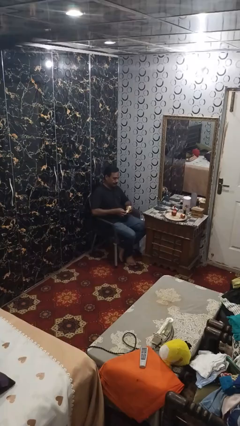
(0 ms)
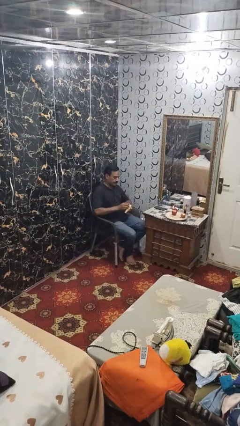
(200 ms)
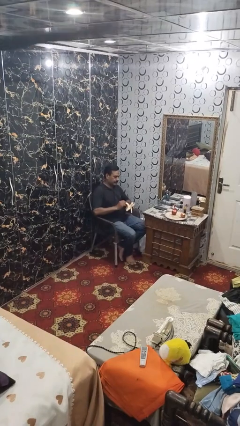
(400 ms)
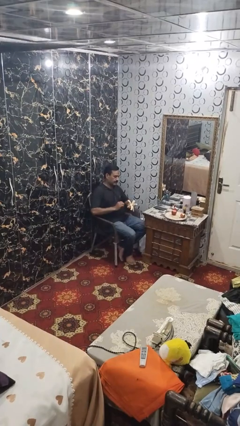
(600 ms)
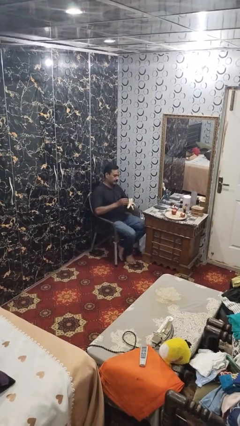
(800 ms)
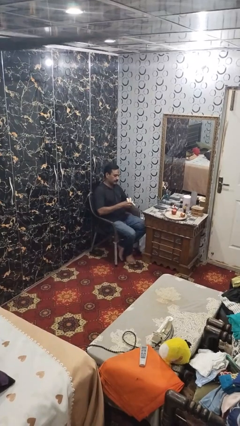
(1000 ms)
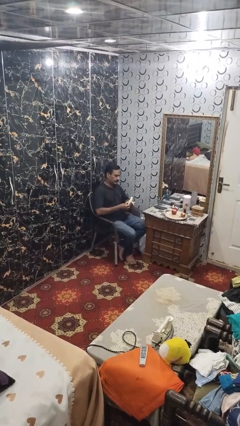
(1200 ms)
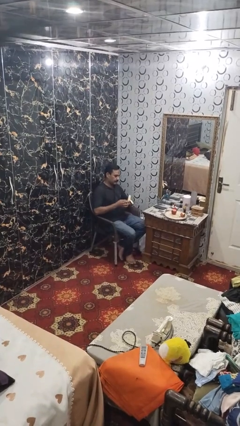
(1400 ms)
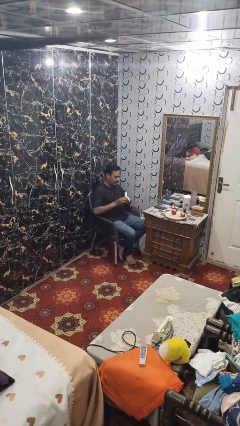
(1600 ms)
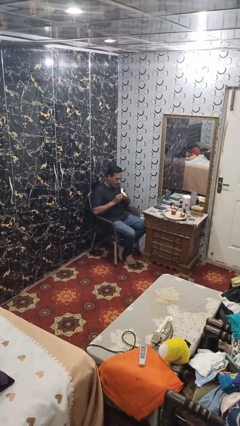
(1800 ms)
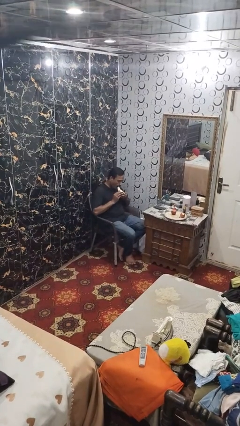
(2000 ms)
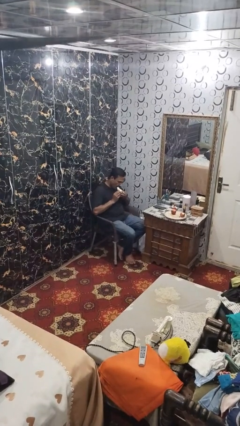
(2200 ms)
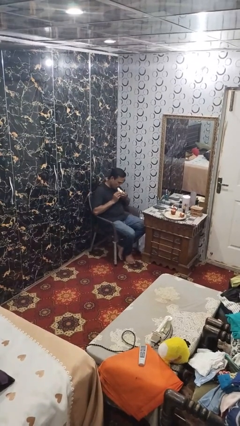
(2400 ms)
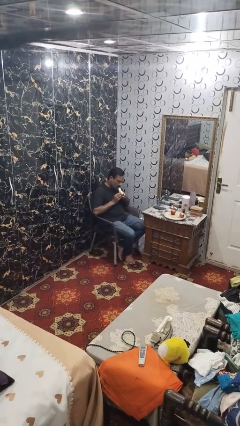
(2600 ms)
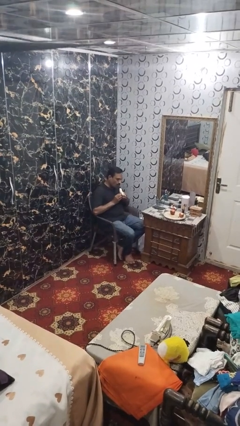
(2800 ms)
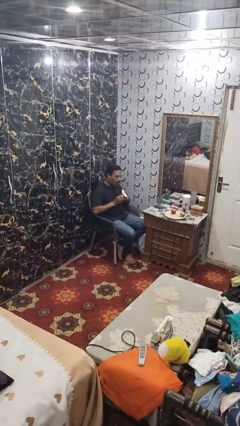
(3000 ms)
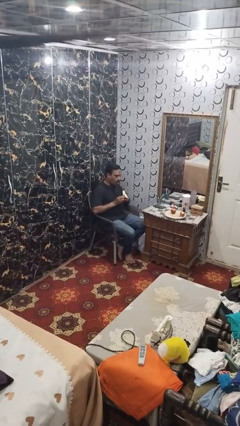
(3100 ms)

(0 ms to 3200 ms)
person eats banana

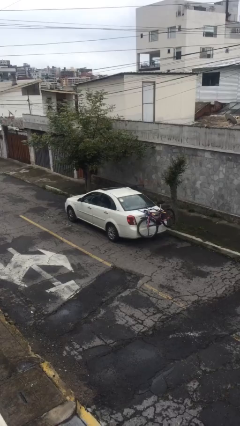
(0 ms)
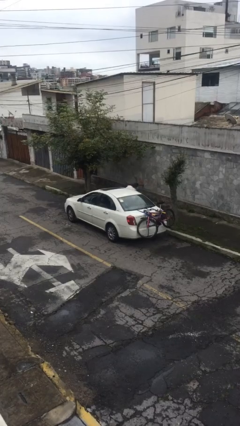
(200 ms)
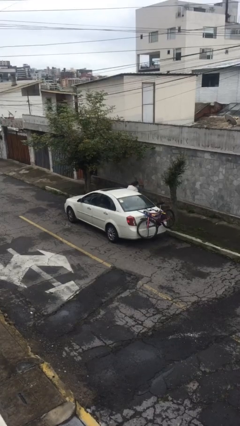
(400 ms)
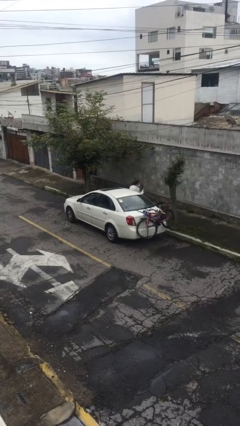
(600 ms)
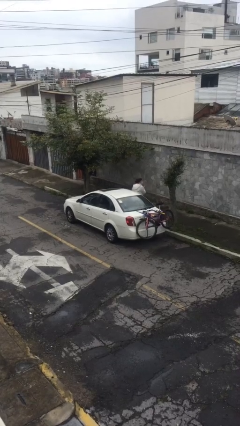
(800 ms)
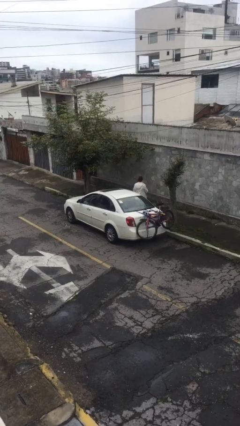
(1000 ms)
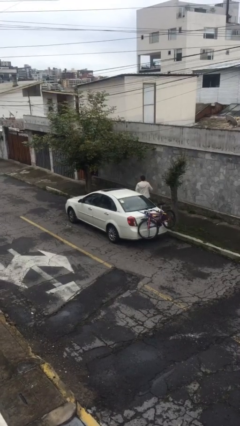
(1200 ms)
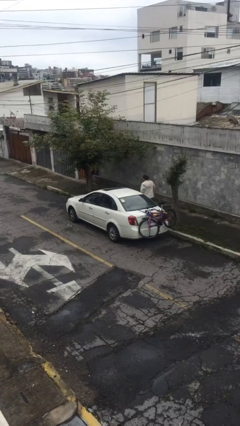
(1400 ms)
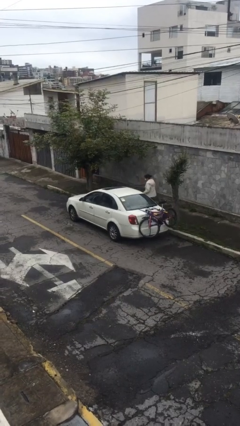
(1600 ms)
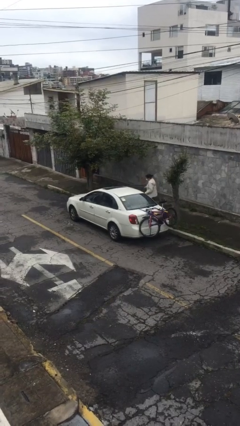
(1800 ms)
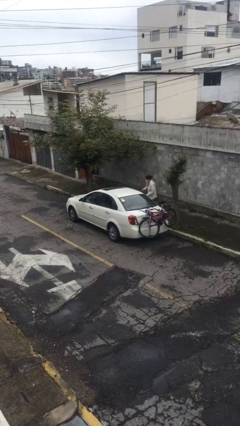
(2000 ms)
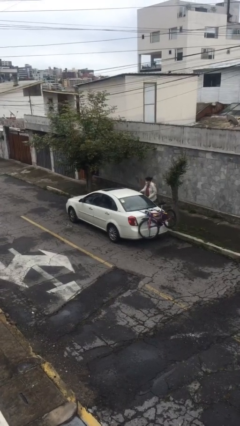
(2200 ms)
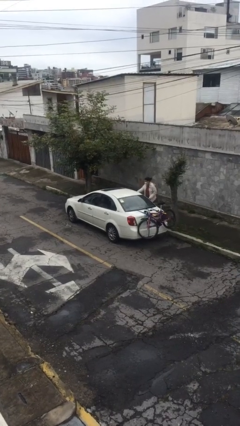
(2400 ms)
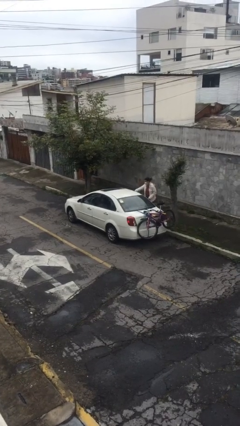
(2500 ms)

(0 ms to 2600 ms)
car drops off person

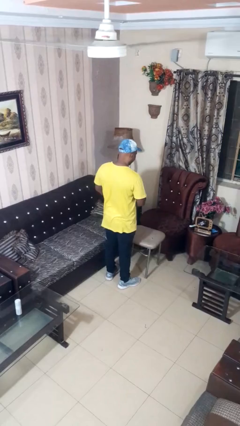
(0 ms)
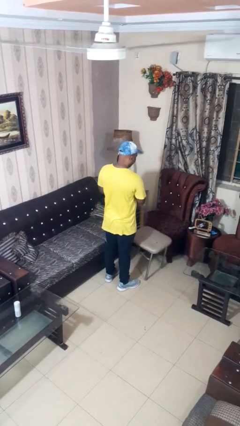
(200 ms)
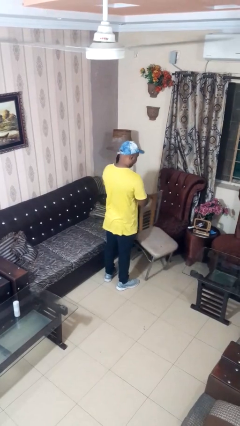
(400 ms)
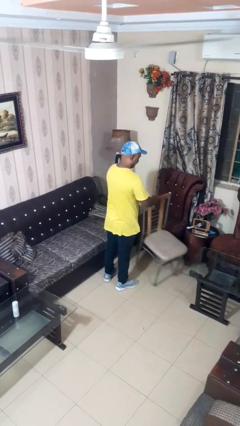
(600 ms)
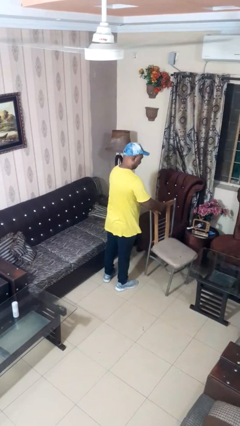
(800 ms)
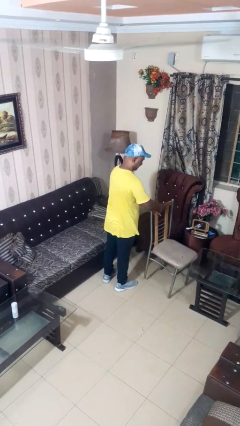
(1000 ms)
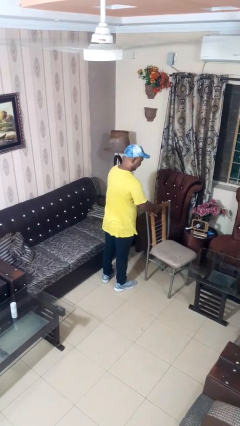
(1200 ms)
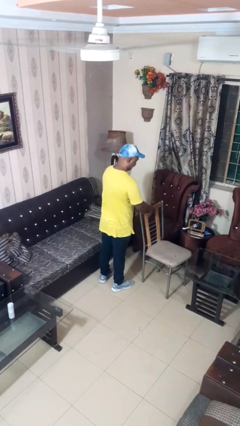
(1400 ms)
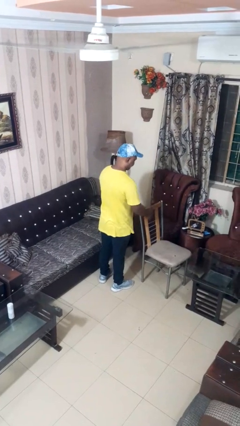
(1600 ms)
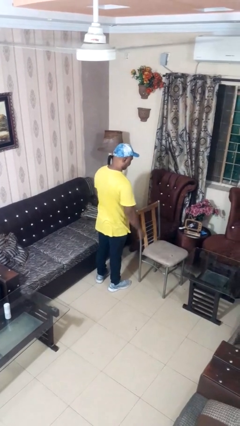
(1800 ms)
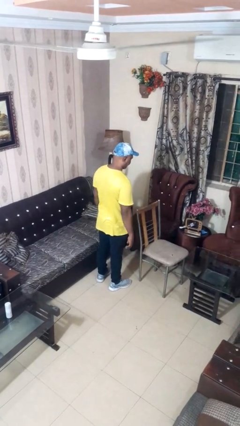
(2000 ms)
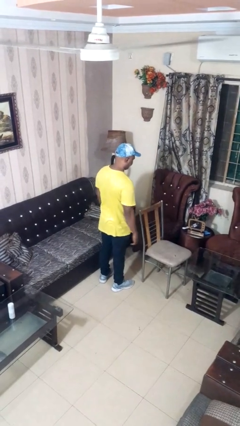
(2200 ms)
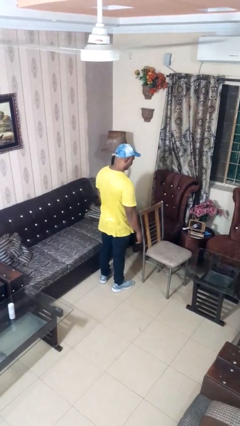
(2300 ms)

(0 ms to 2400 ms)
person pushes in chair

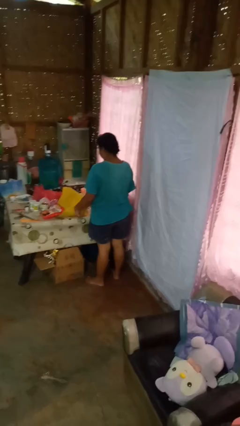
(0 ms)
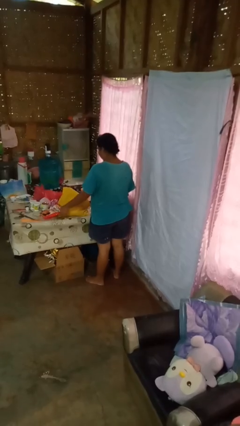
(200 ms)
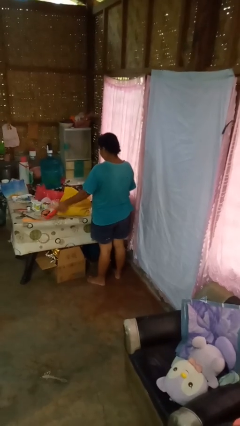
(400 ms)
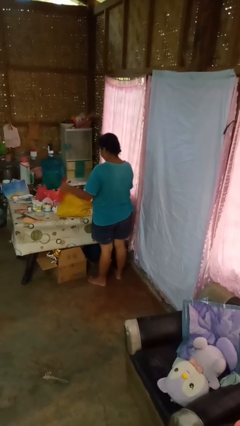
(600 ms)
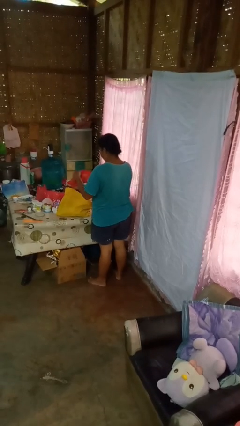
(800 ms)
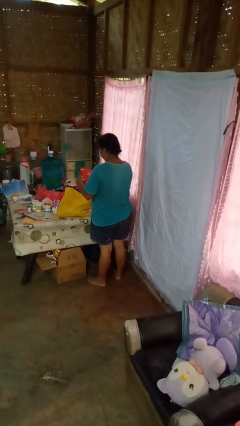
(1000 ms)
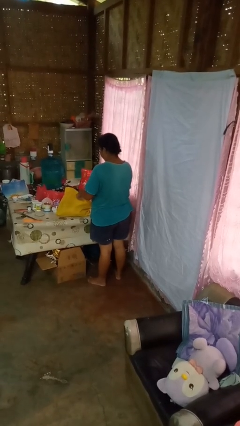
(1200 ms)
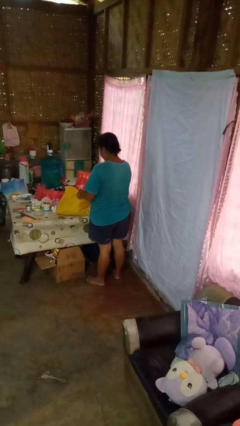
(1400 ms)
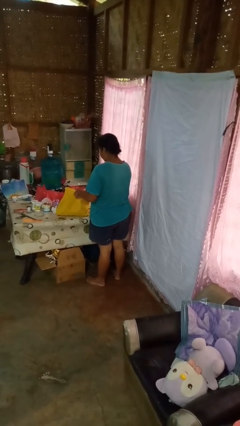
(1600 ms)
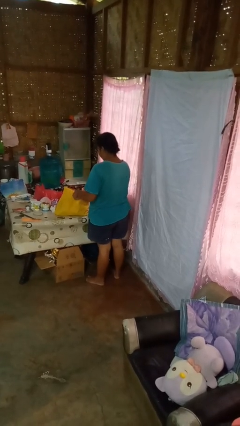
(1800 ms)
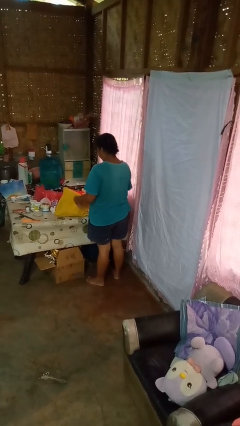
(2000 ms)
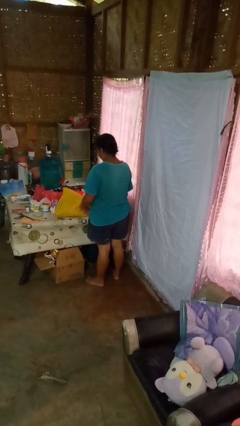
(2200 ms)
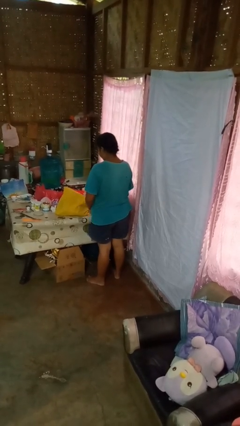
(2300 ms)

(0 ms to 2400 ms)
person puts object into bag

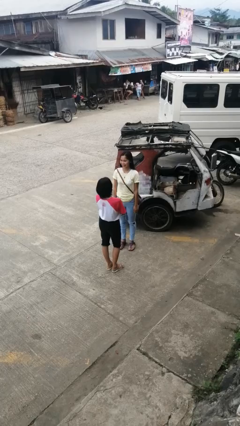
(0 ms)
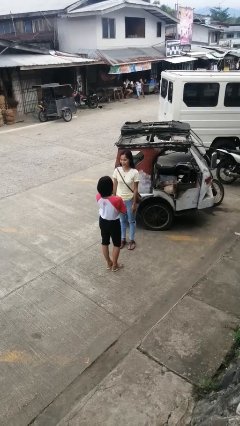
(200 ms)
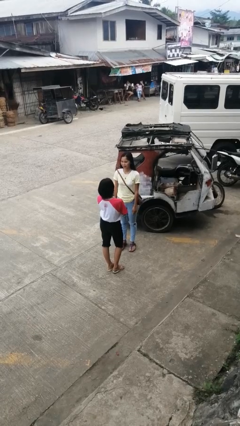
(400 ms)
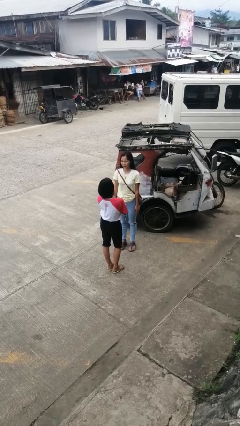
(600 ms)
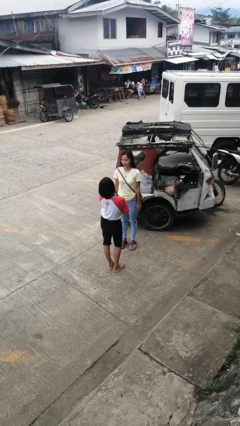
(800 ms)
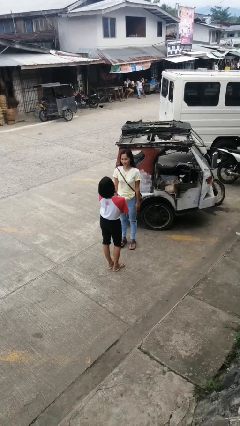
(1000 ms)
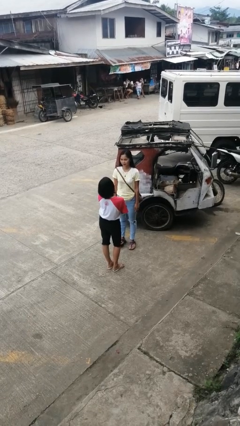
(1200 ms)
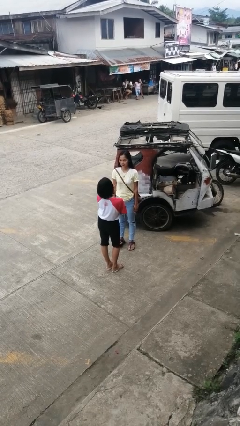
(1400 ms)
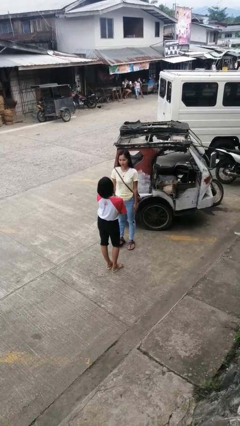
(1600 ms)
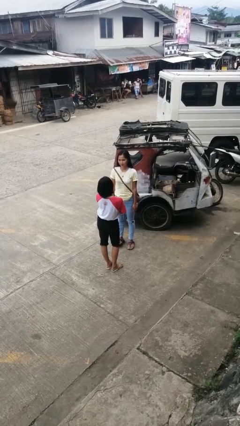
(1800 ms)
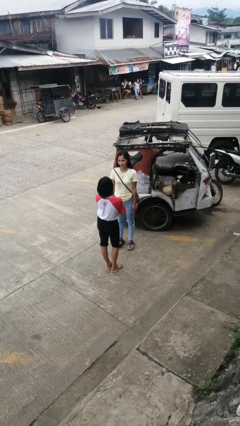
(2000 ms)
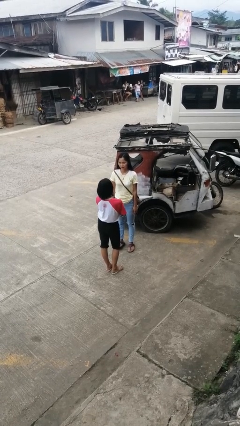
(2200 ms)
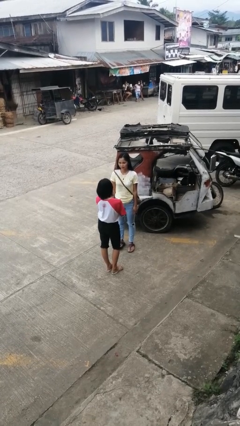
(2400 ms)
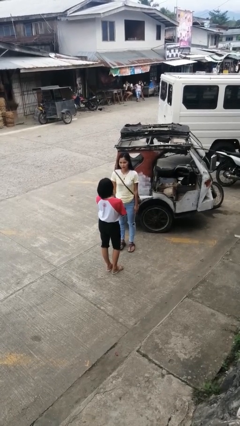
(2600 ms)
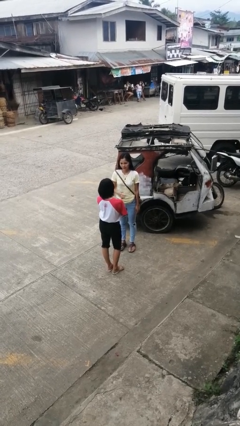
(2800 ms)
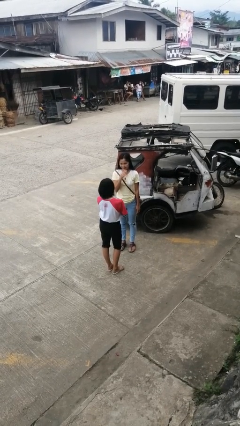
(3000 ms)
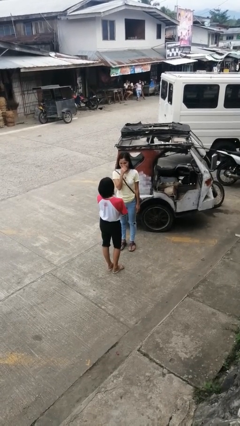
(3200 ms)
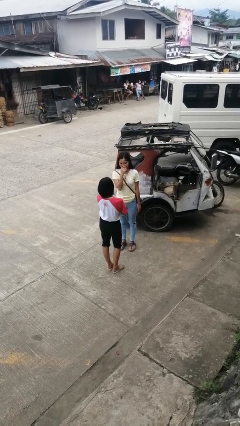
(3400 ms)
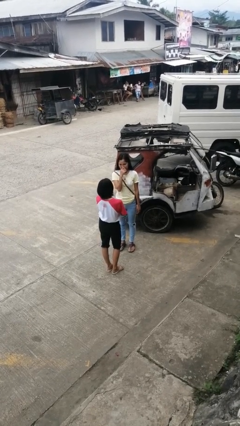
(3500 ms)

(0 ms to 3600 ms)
person laughs with person

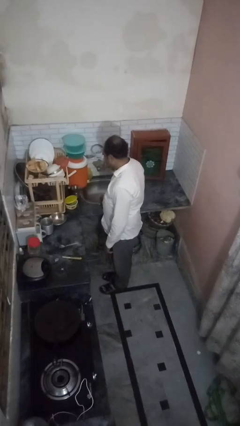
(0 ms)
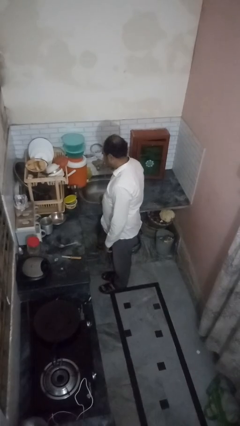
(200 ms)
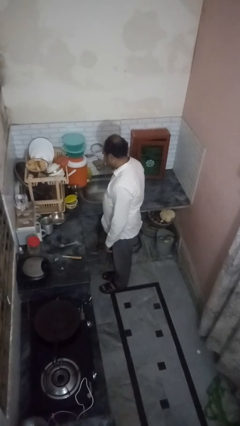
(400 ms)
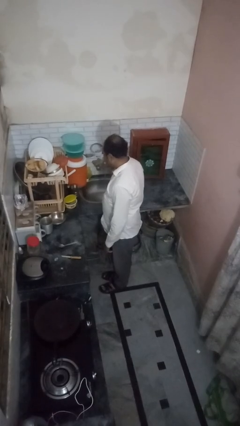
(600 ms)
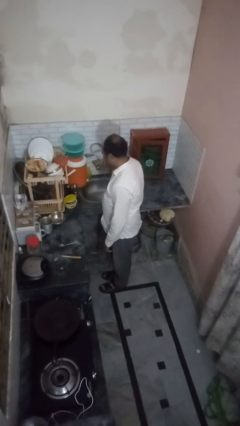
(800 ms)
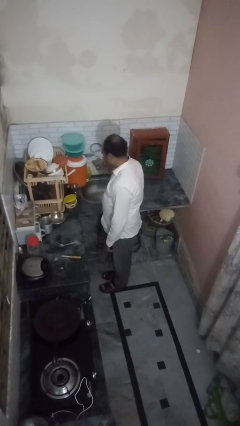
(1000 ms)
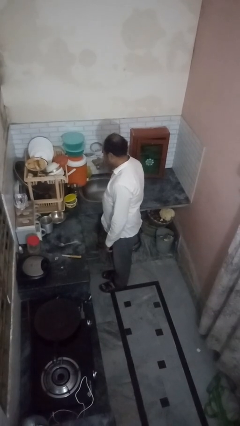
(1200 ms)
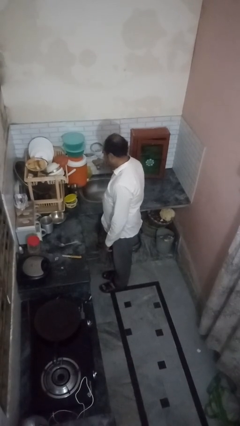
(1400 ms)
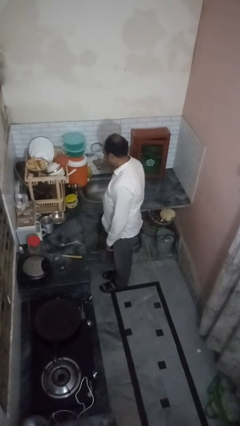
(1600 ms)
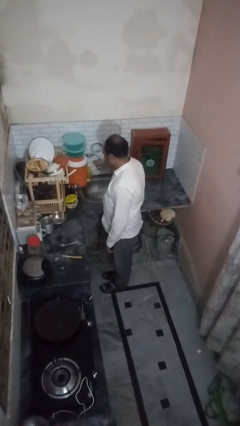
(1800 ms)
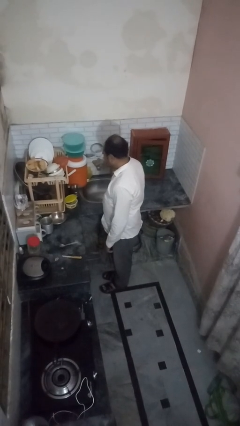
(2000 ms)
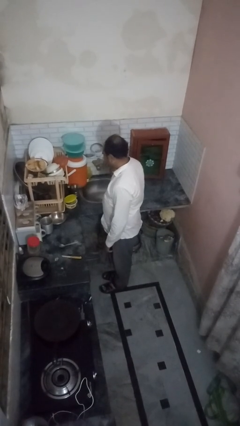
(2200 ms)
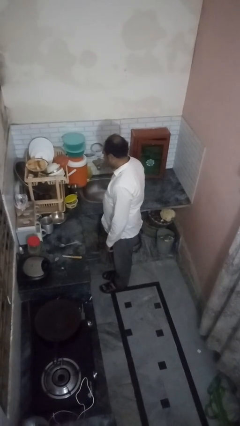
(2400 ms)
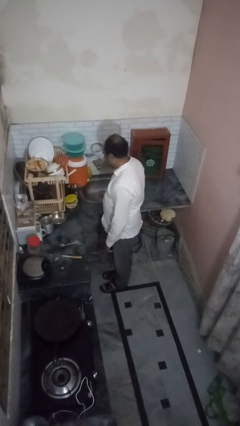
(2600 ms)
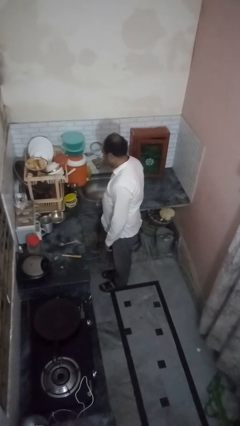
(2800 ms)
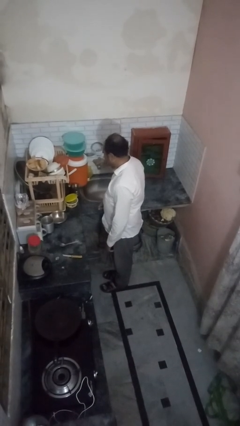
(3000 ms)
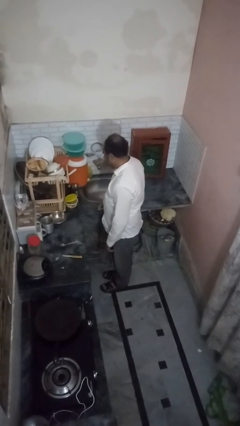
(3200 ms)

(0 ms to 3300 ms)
person turns off faucet
